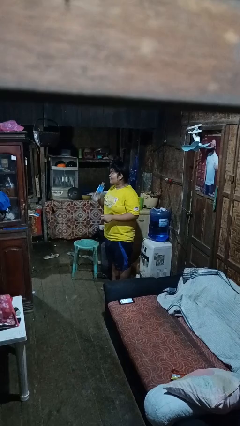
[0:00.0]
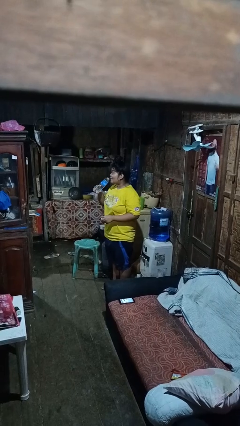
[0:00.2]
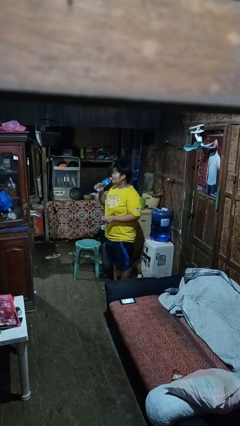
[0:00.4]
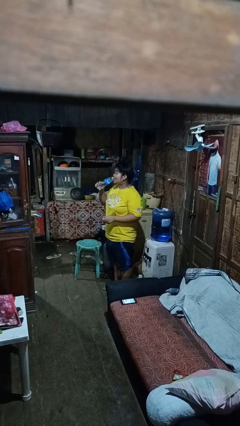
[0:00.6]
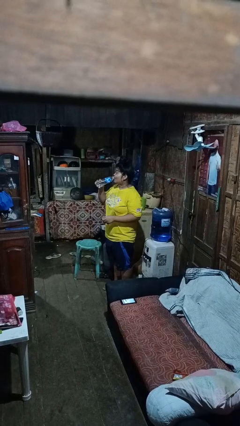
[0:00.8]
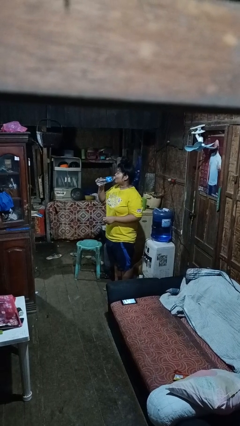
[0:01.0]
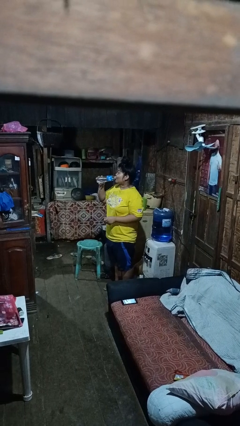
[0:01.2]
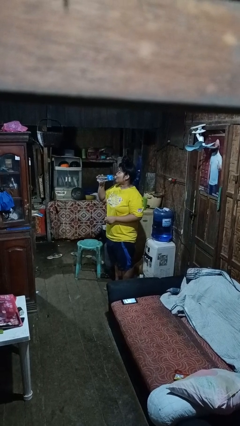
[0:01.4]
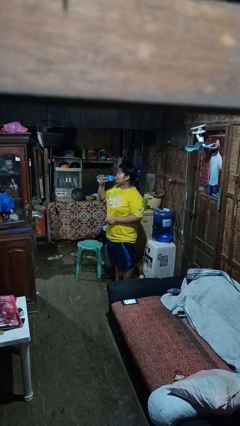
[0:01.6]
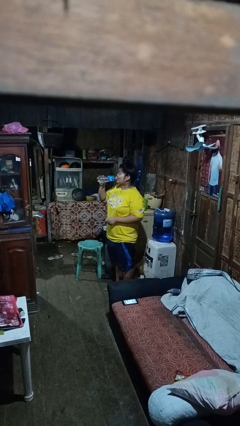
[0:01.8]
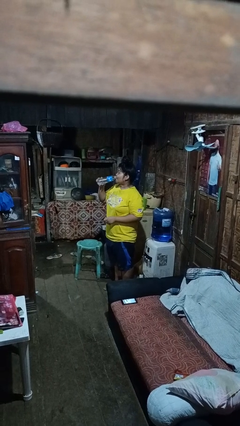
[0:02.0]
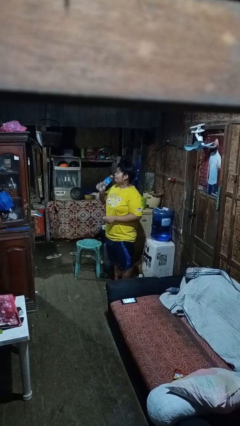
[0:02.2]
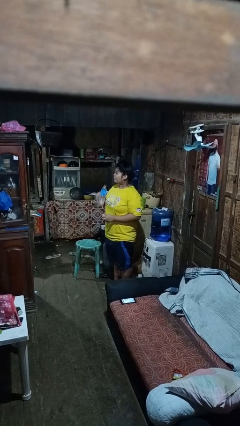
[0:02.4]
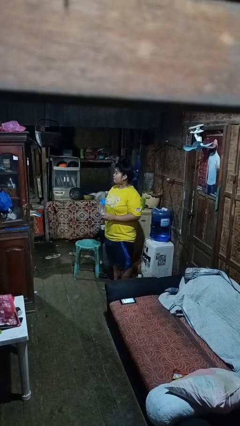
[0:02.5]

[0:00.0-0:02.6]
person drinks from bottle

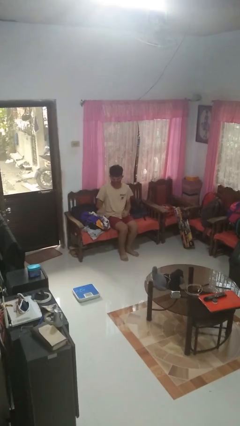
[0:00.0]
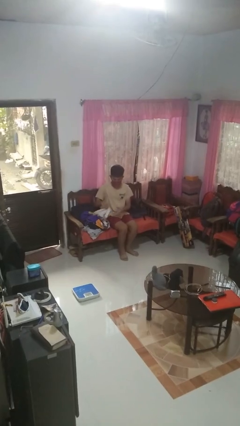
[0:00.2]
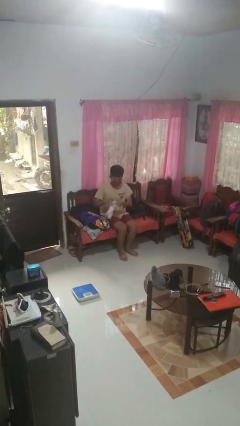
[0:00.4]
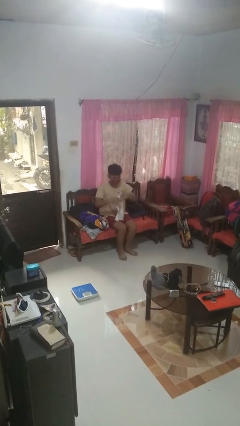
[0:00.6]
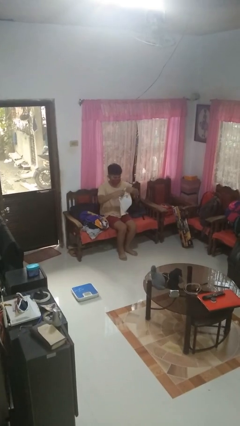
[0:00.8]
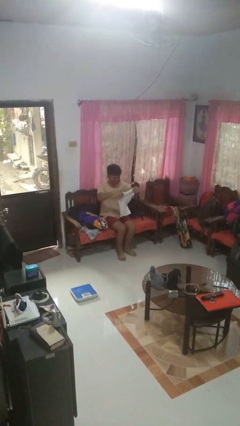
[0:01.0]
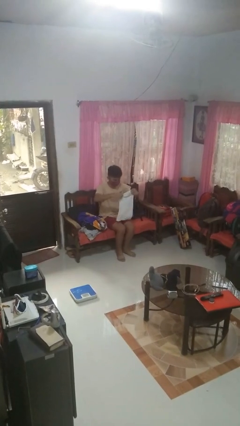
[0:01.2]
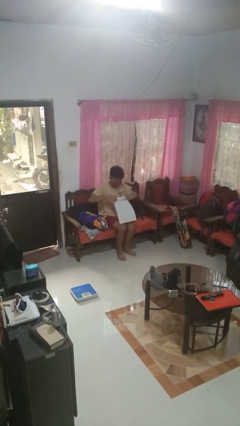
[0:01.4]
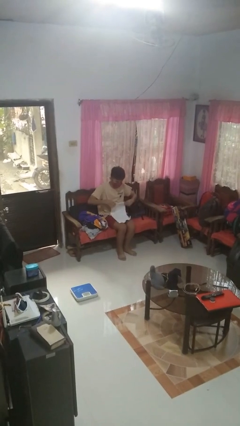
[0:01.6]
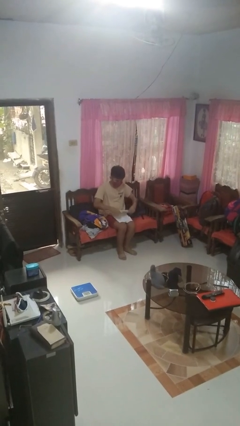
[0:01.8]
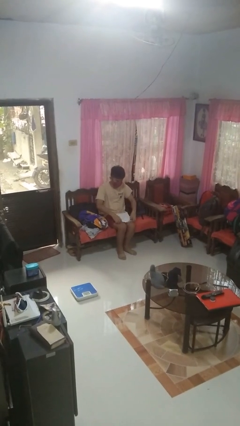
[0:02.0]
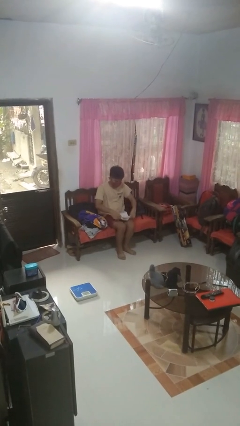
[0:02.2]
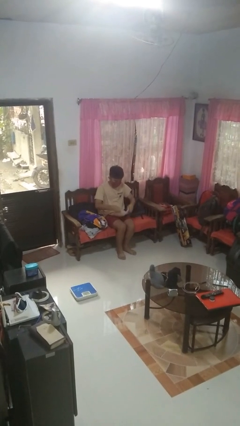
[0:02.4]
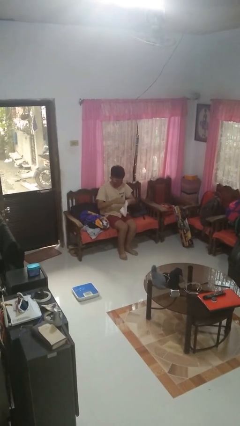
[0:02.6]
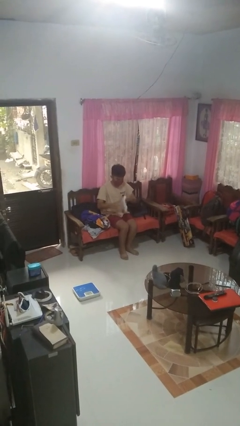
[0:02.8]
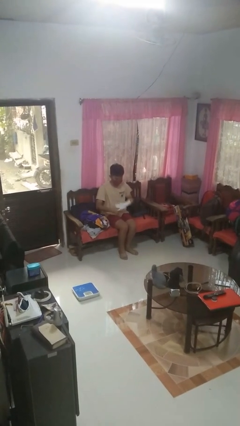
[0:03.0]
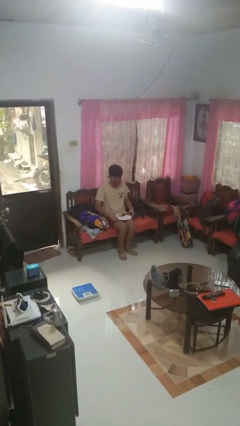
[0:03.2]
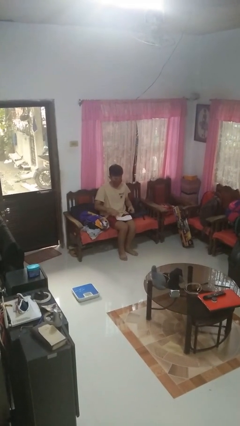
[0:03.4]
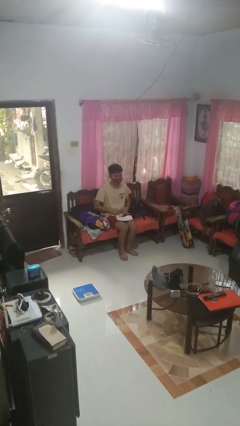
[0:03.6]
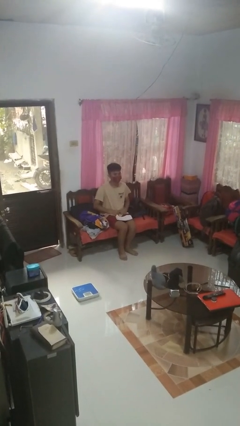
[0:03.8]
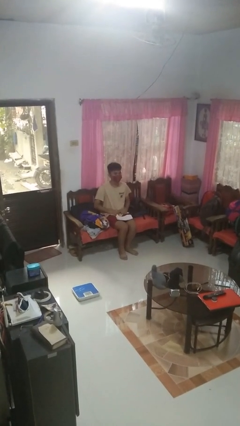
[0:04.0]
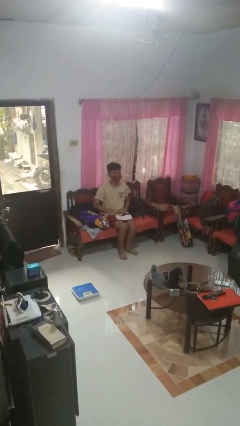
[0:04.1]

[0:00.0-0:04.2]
person folds towel

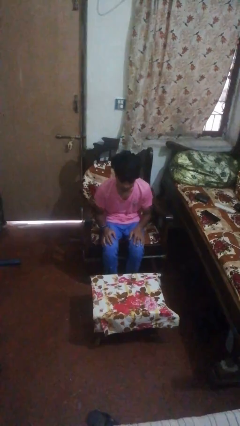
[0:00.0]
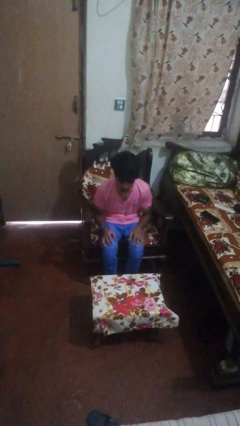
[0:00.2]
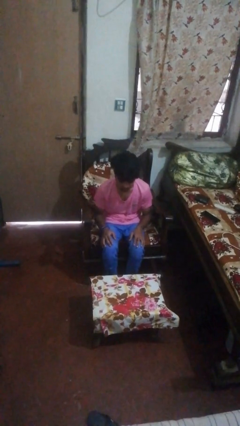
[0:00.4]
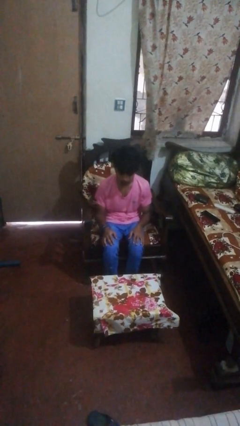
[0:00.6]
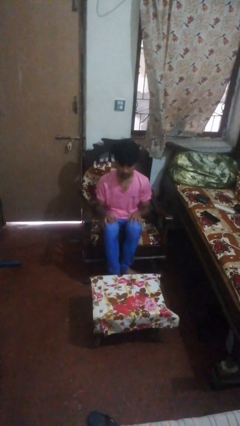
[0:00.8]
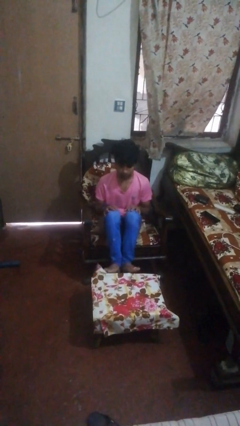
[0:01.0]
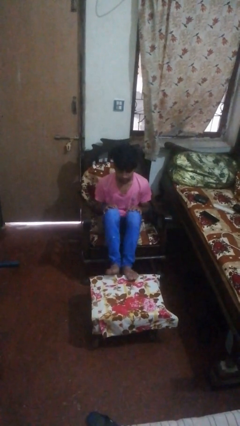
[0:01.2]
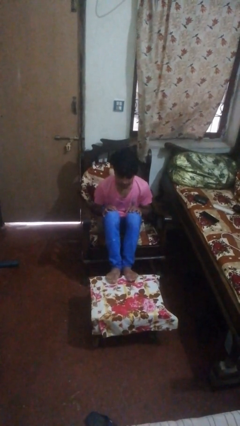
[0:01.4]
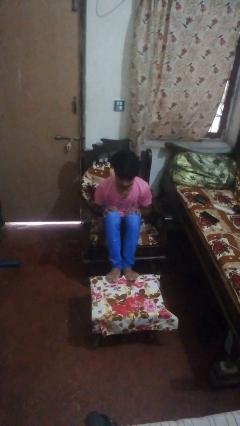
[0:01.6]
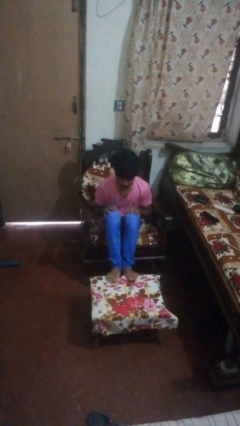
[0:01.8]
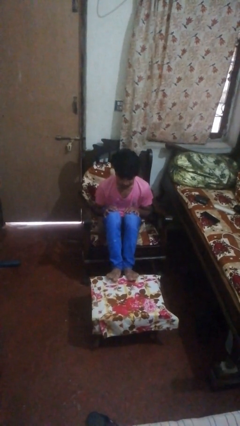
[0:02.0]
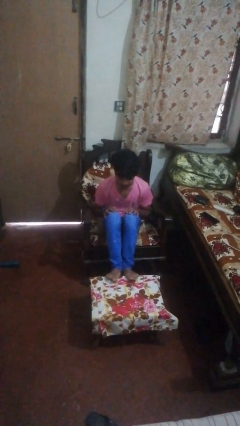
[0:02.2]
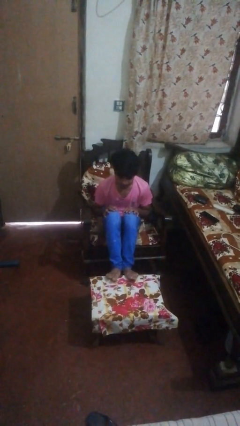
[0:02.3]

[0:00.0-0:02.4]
person puts feet up

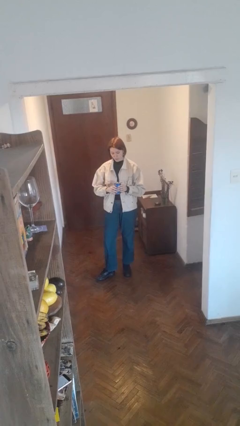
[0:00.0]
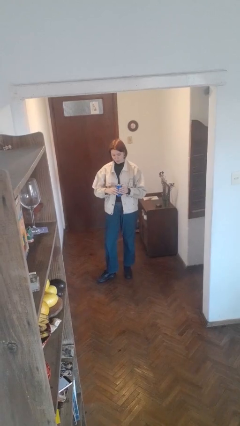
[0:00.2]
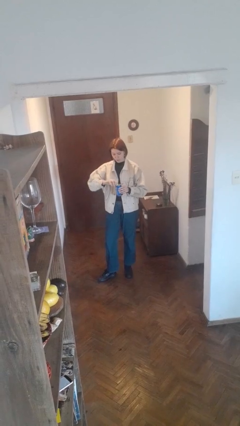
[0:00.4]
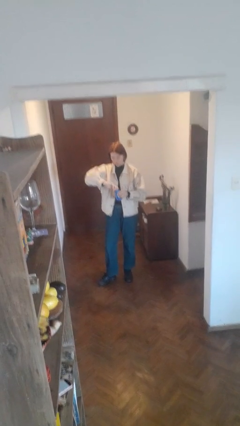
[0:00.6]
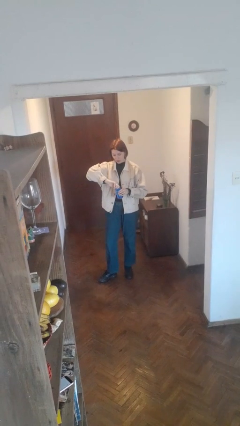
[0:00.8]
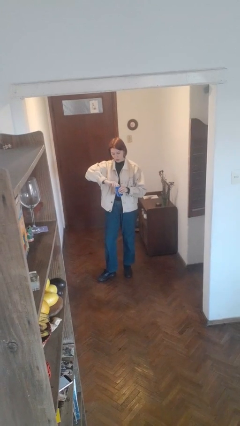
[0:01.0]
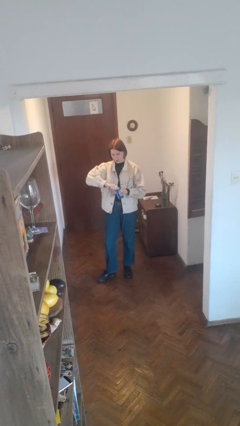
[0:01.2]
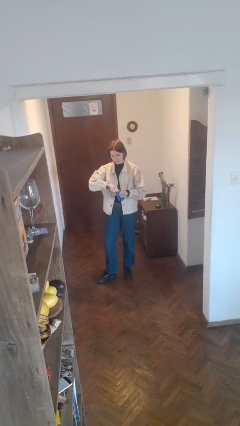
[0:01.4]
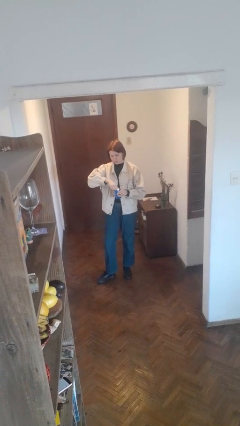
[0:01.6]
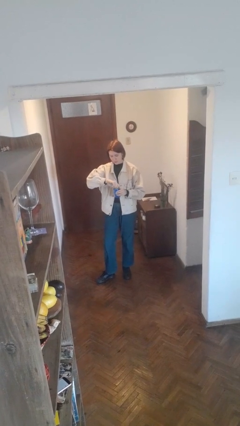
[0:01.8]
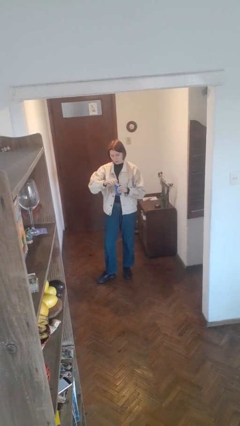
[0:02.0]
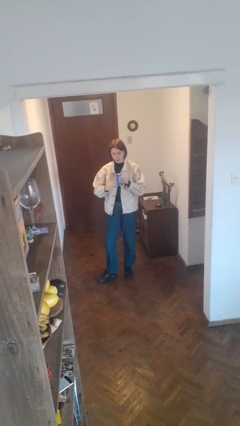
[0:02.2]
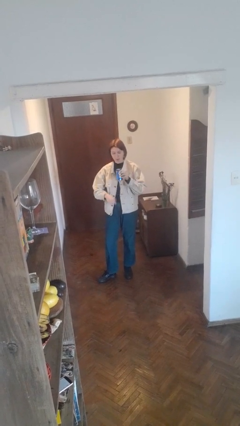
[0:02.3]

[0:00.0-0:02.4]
person opens beverage can

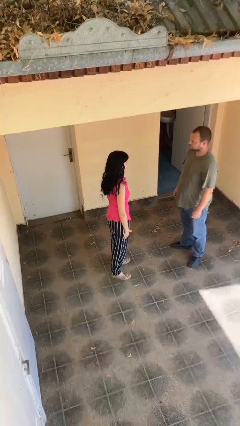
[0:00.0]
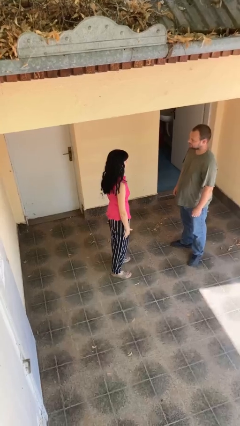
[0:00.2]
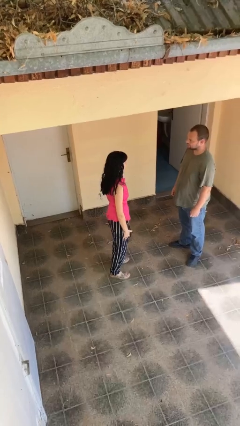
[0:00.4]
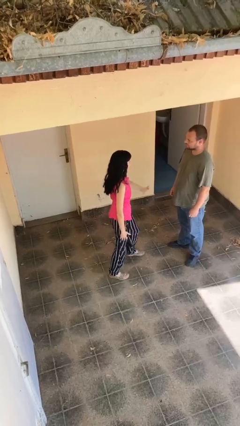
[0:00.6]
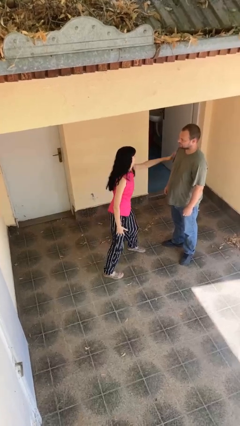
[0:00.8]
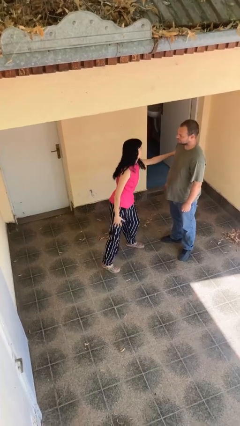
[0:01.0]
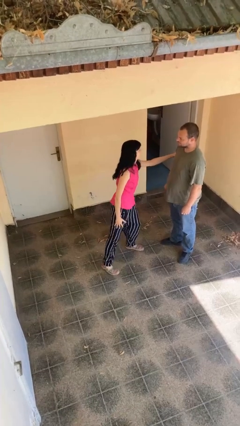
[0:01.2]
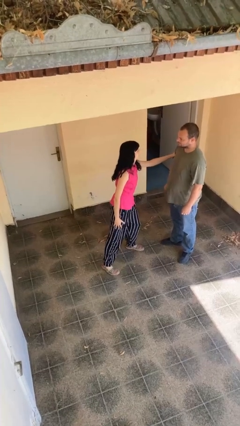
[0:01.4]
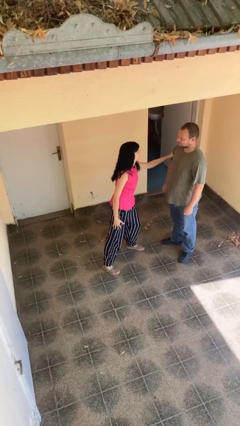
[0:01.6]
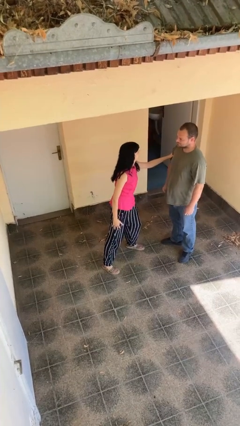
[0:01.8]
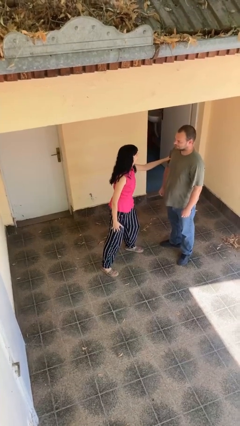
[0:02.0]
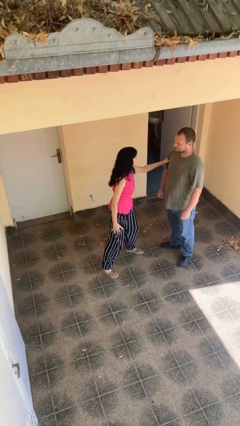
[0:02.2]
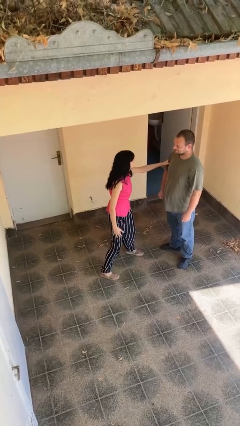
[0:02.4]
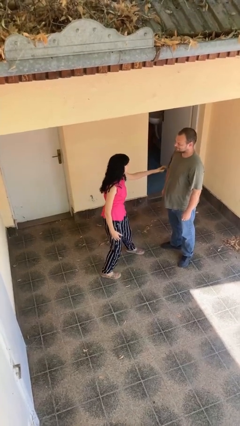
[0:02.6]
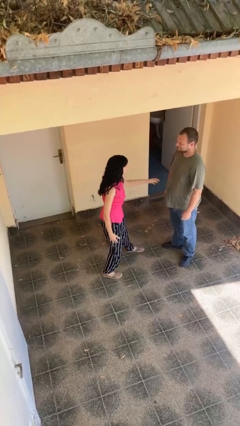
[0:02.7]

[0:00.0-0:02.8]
person grabs person by bicep

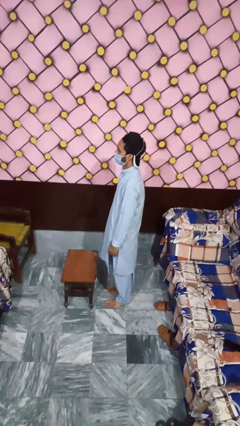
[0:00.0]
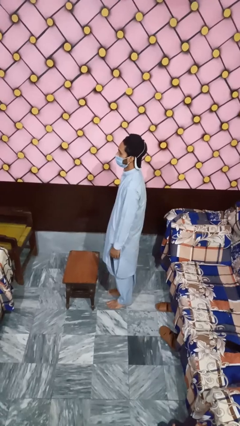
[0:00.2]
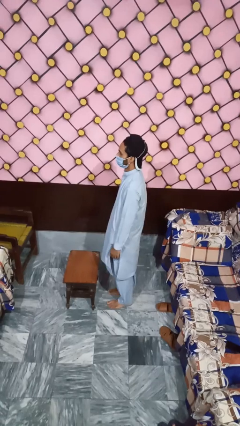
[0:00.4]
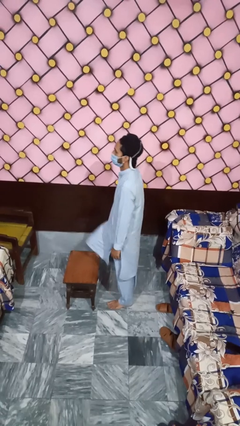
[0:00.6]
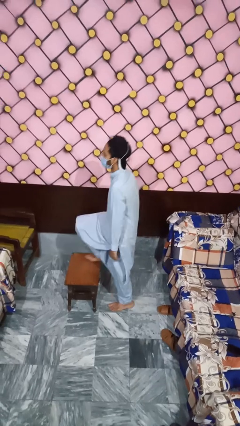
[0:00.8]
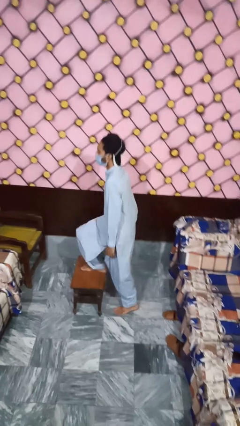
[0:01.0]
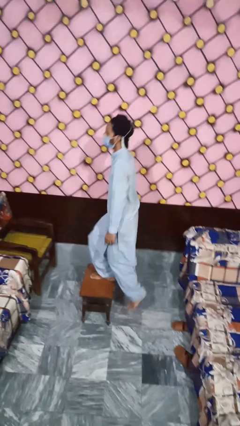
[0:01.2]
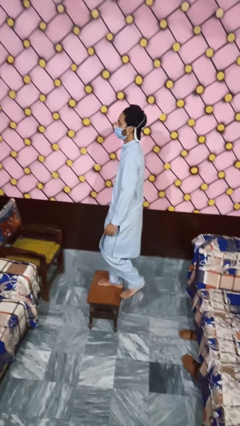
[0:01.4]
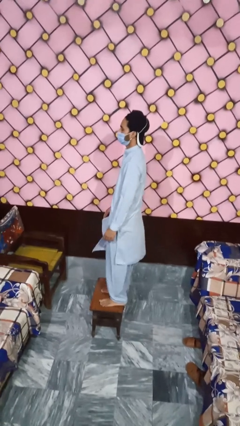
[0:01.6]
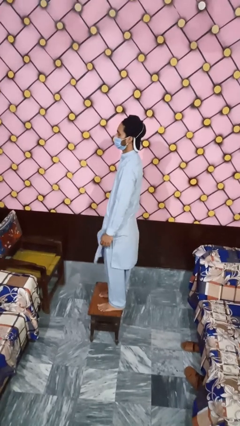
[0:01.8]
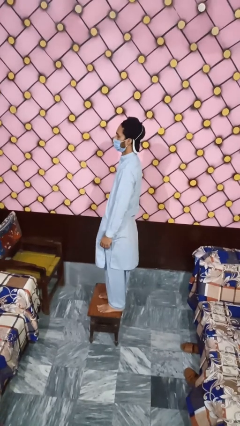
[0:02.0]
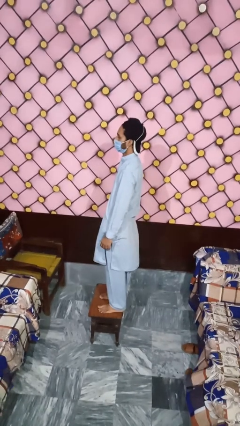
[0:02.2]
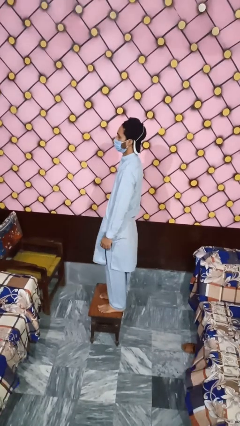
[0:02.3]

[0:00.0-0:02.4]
person climbs on table

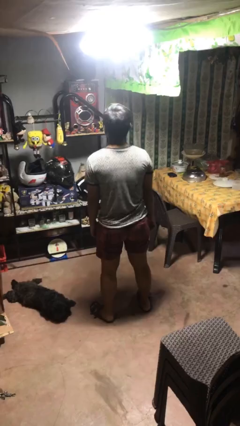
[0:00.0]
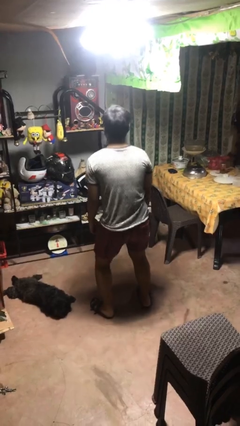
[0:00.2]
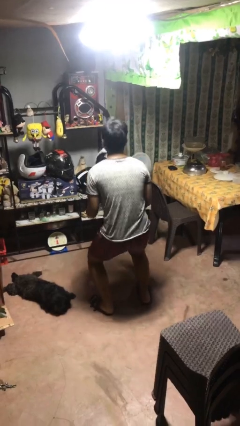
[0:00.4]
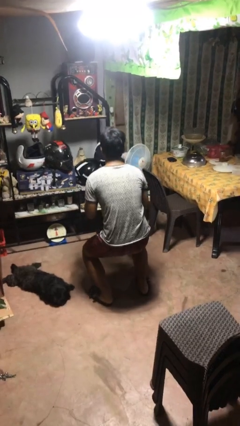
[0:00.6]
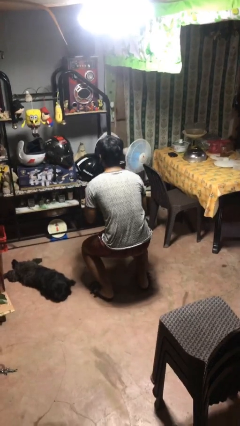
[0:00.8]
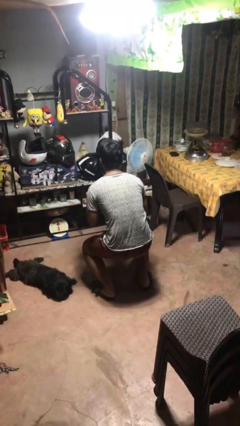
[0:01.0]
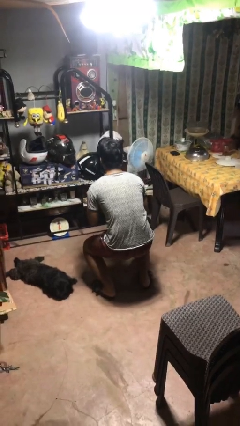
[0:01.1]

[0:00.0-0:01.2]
person squats
